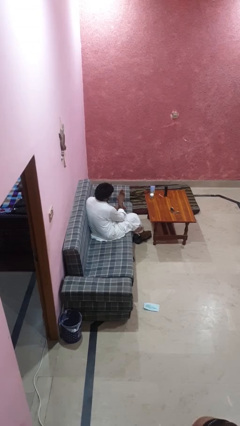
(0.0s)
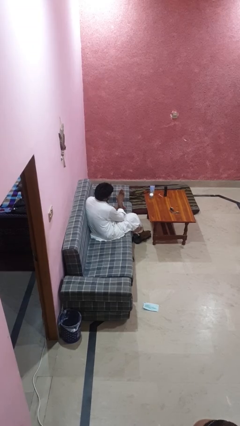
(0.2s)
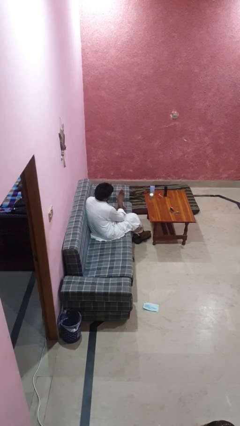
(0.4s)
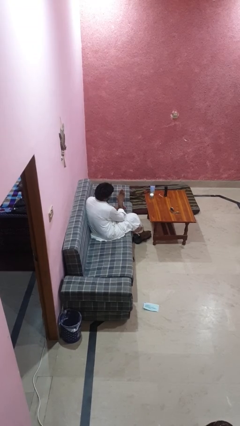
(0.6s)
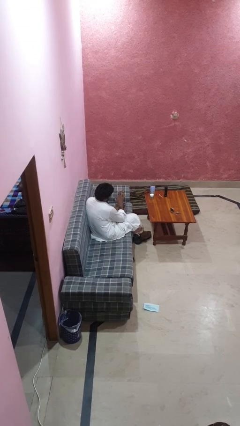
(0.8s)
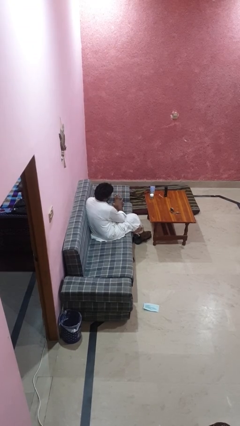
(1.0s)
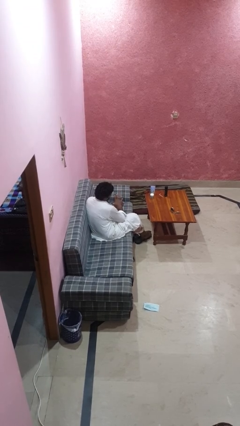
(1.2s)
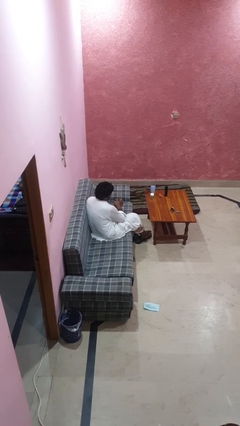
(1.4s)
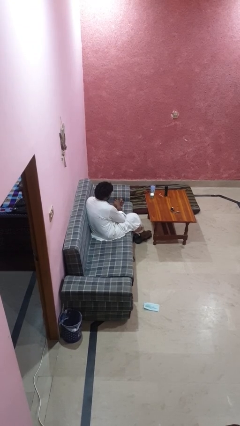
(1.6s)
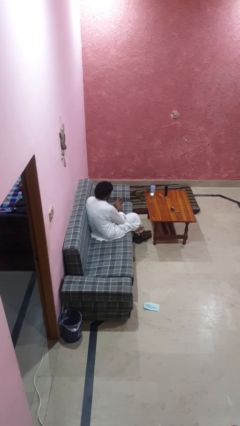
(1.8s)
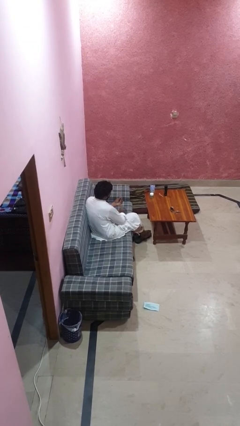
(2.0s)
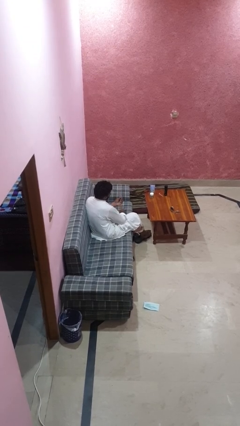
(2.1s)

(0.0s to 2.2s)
person takes off ring

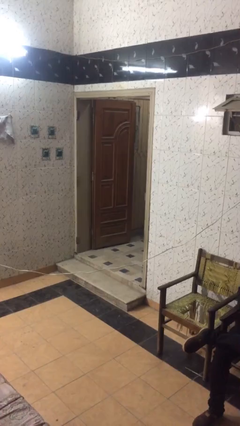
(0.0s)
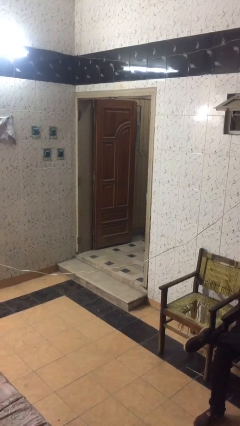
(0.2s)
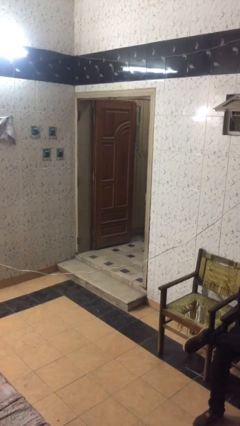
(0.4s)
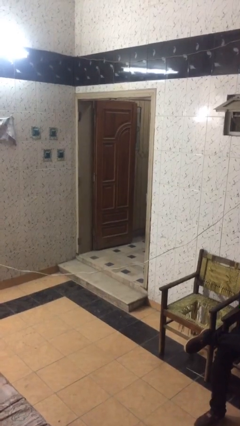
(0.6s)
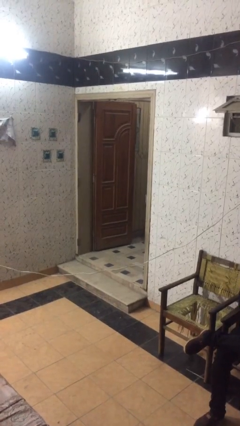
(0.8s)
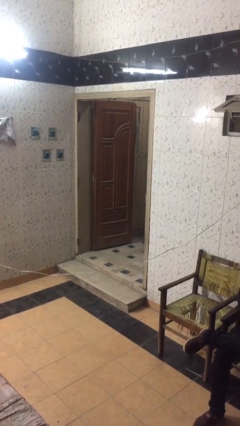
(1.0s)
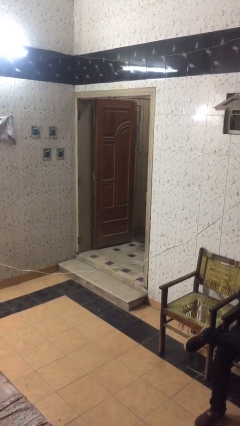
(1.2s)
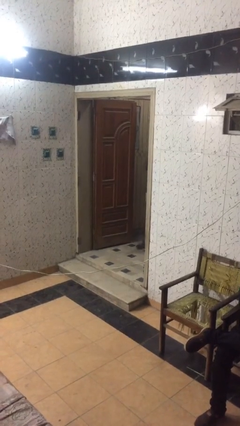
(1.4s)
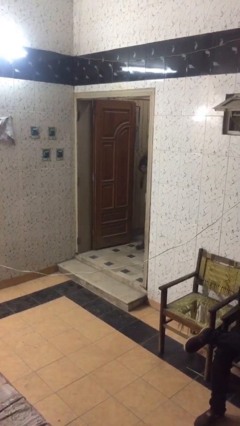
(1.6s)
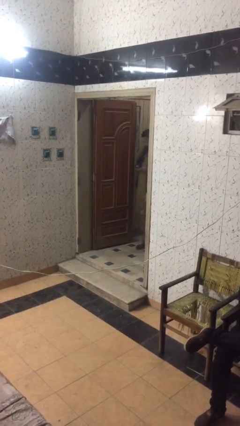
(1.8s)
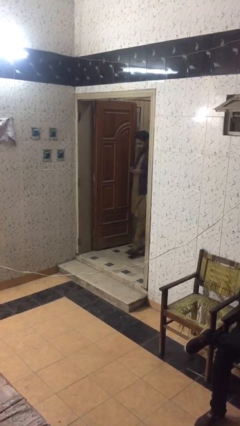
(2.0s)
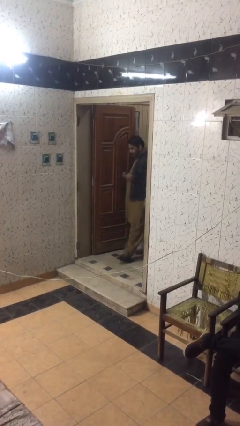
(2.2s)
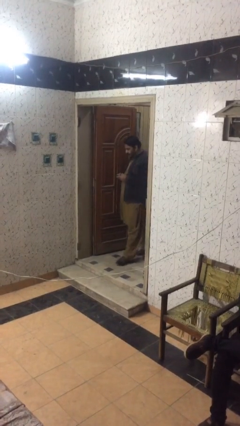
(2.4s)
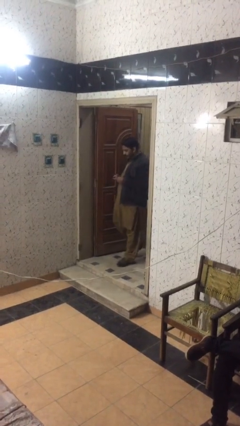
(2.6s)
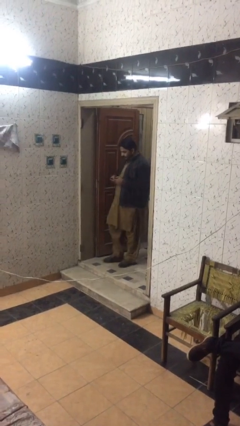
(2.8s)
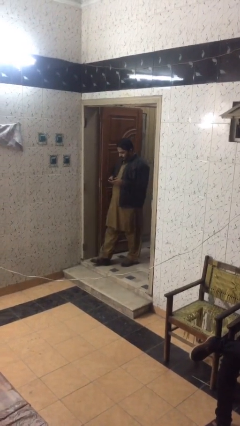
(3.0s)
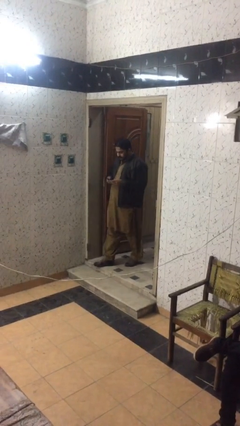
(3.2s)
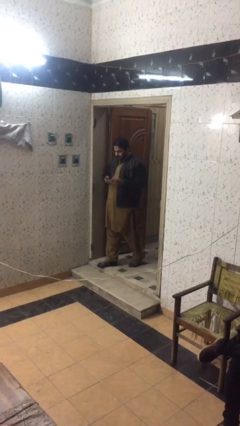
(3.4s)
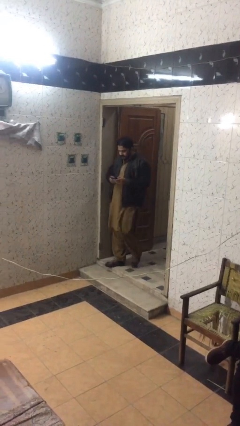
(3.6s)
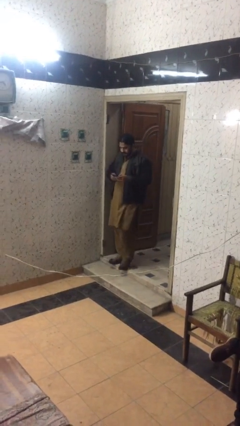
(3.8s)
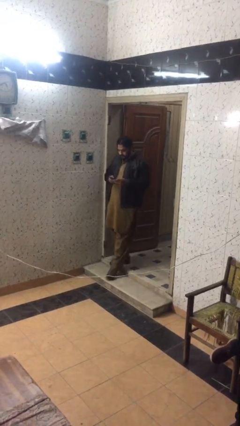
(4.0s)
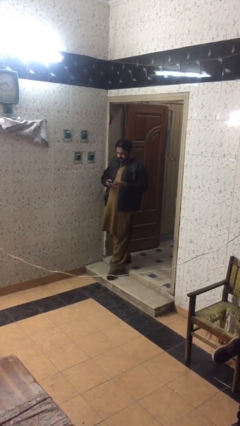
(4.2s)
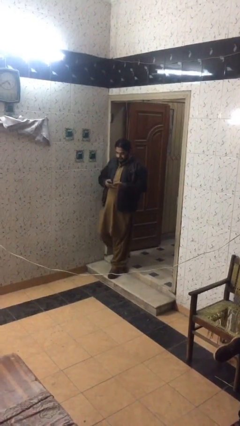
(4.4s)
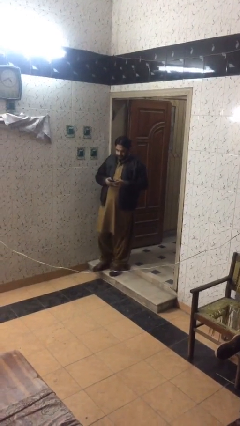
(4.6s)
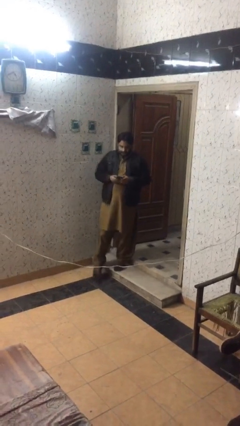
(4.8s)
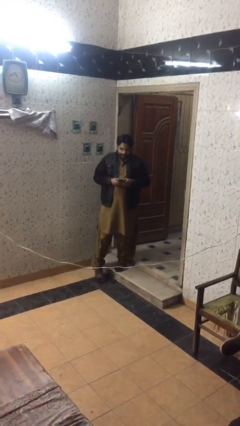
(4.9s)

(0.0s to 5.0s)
person enters scene through structure

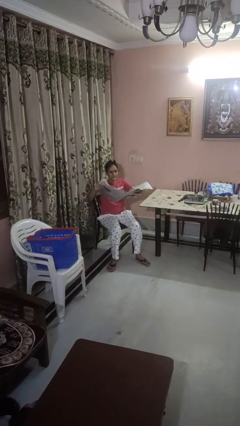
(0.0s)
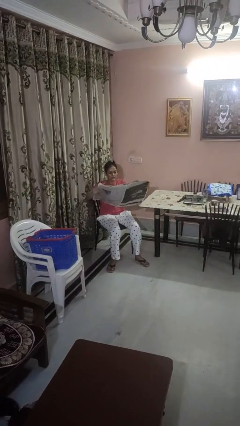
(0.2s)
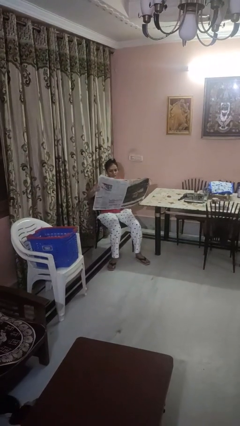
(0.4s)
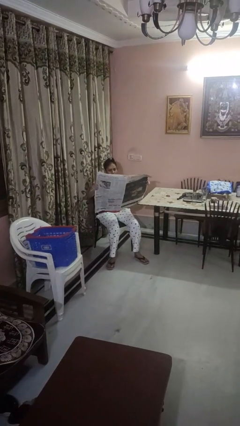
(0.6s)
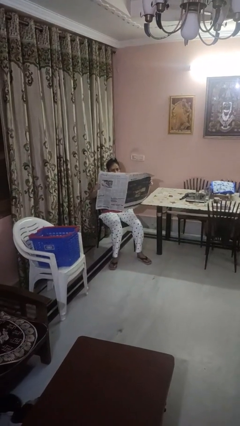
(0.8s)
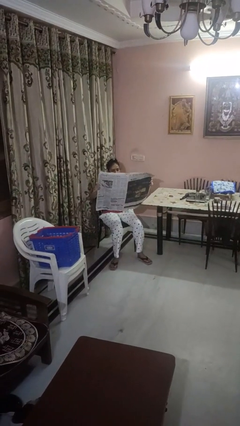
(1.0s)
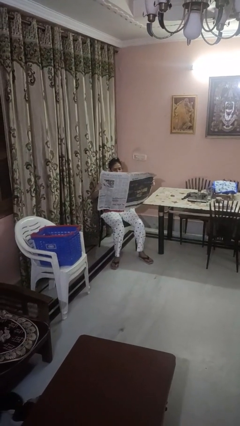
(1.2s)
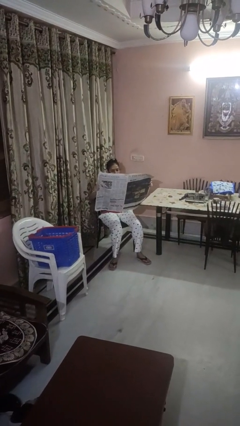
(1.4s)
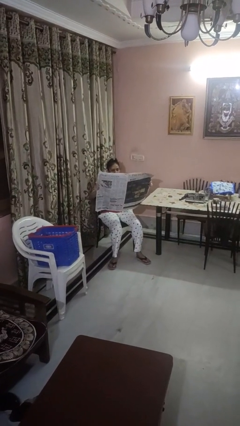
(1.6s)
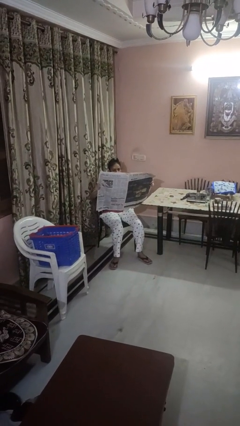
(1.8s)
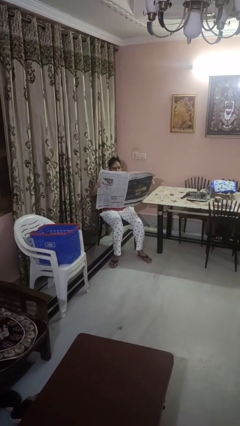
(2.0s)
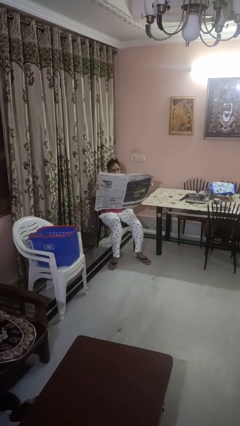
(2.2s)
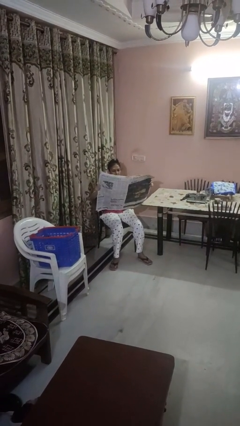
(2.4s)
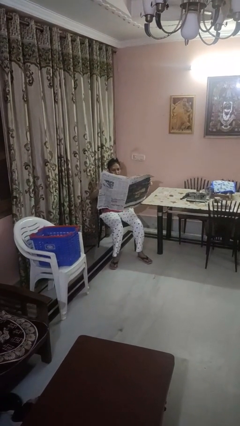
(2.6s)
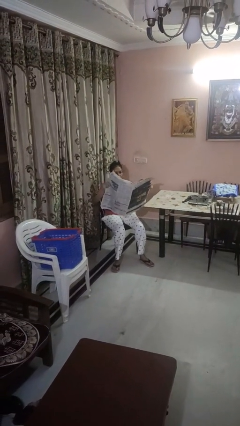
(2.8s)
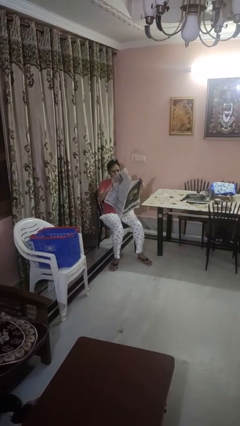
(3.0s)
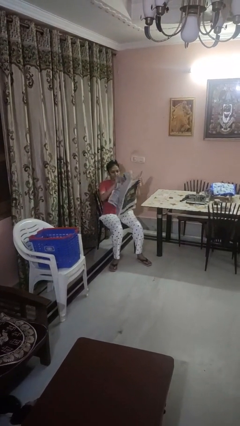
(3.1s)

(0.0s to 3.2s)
person reads newspaper

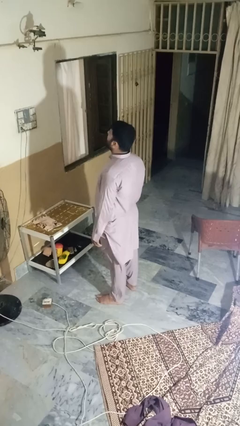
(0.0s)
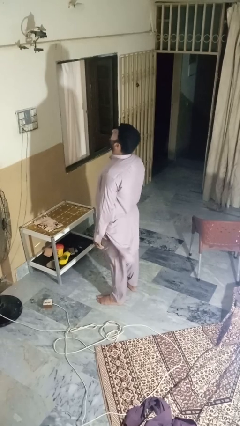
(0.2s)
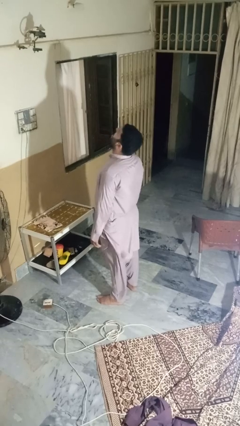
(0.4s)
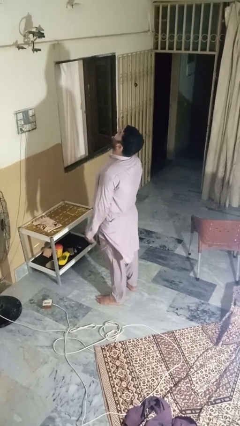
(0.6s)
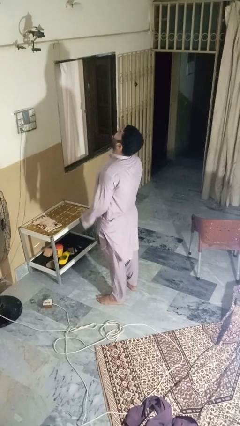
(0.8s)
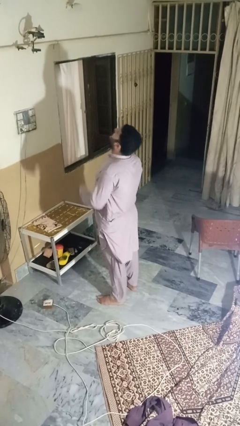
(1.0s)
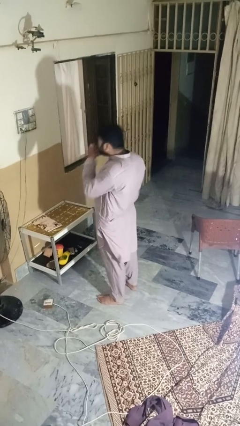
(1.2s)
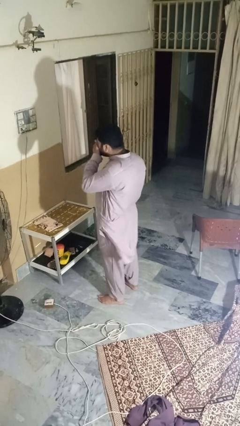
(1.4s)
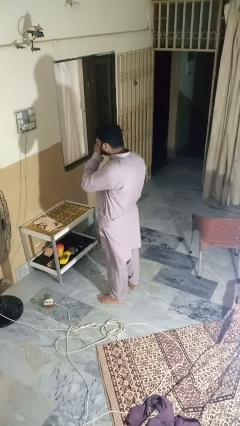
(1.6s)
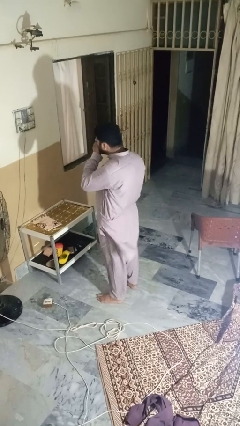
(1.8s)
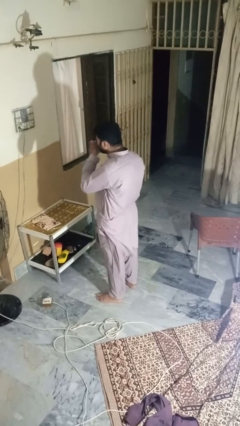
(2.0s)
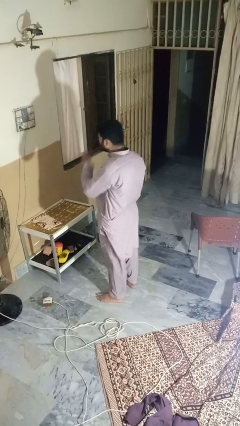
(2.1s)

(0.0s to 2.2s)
person sneezes into hand

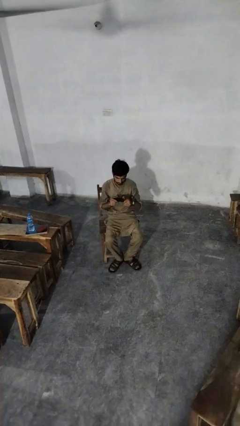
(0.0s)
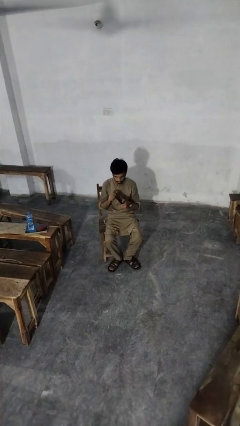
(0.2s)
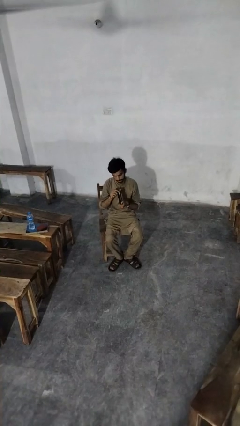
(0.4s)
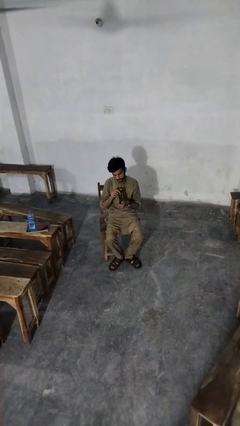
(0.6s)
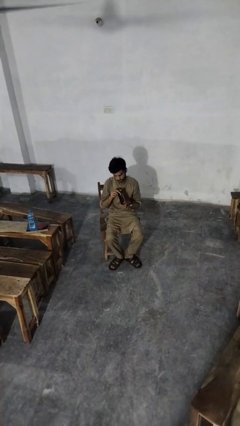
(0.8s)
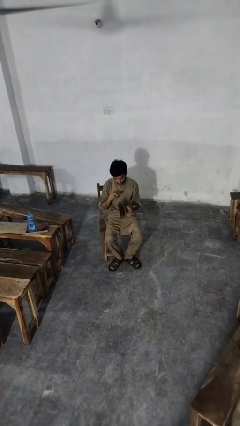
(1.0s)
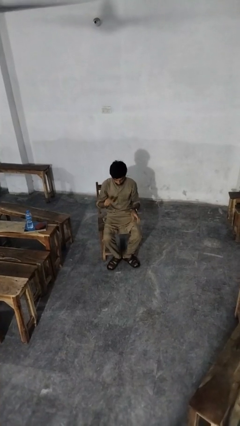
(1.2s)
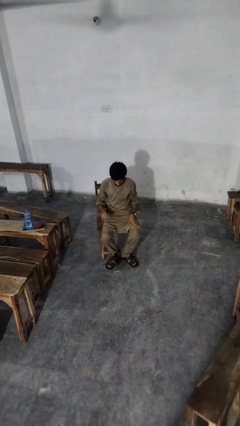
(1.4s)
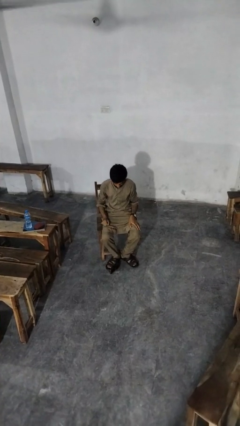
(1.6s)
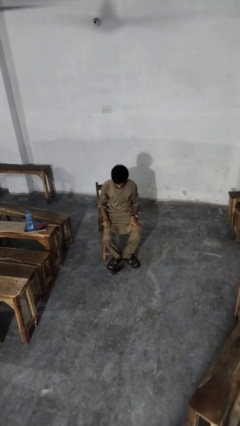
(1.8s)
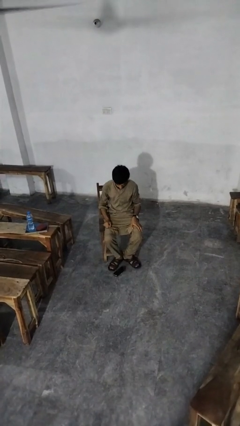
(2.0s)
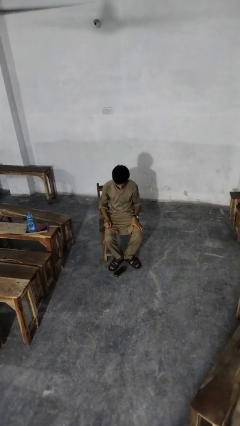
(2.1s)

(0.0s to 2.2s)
person drops object

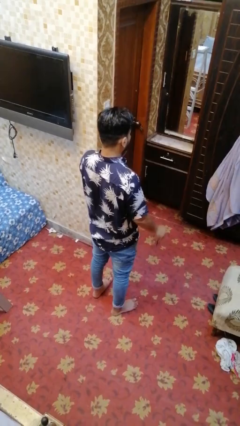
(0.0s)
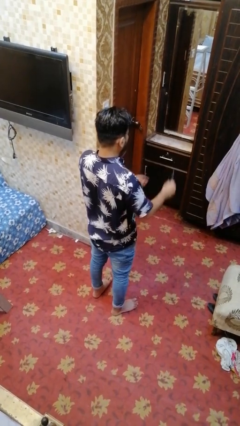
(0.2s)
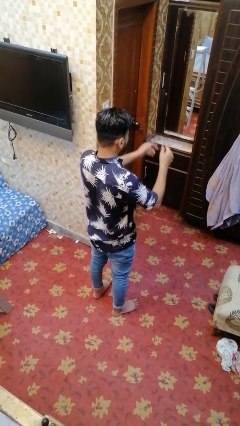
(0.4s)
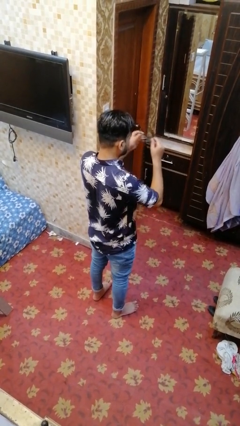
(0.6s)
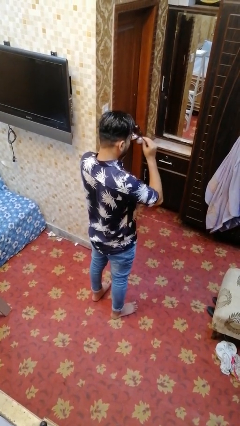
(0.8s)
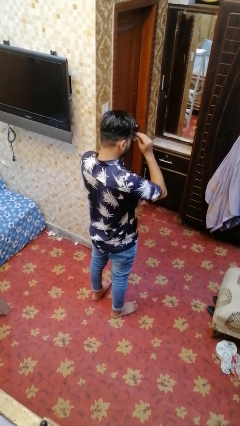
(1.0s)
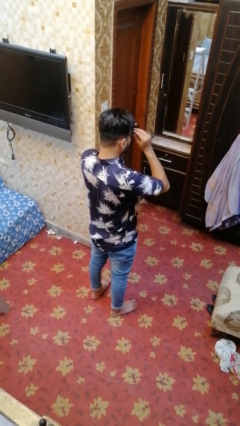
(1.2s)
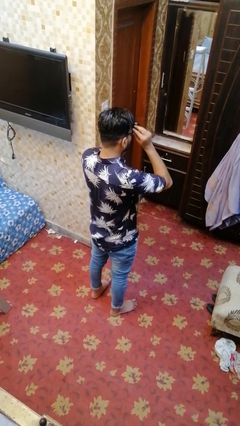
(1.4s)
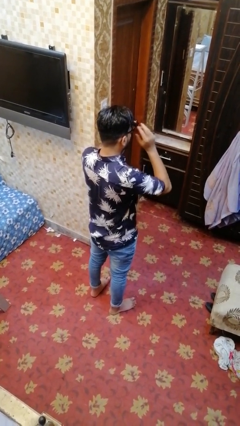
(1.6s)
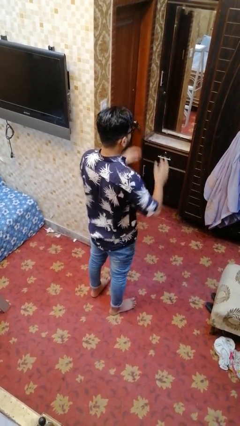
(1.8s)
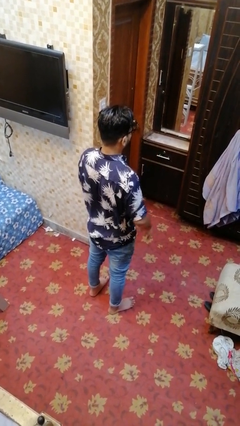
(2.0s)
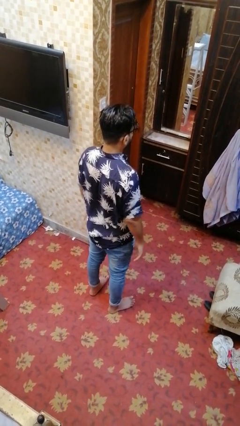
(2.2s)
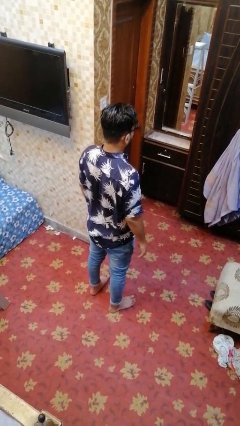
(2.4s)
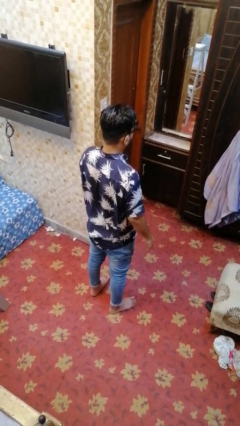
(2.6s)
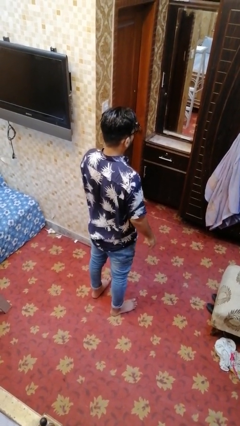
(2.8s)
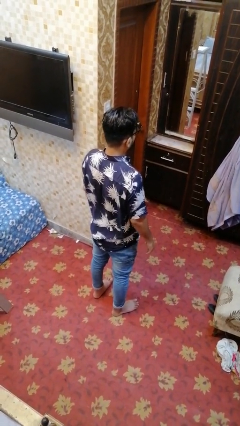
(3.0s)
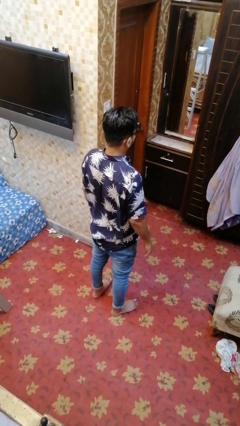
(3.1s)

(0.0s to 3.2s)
person puts on glasses
